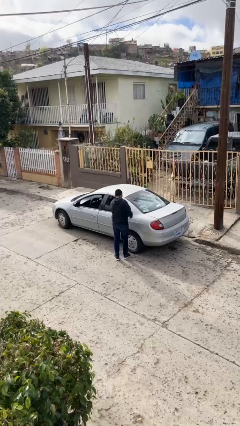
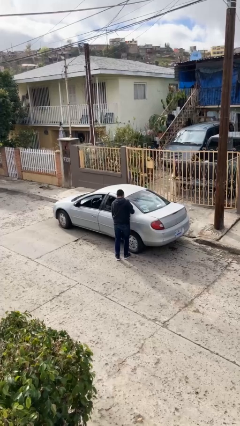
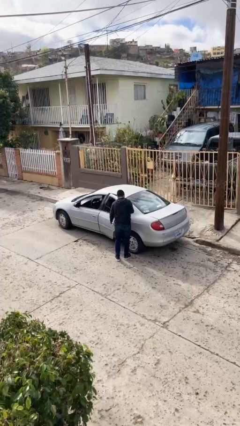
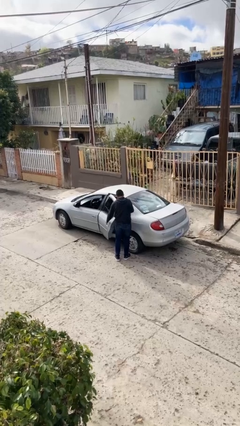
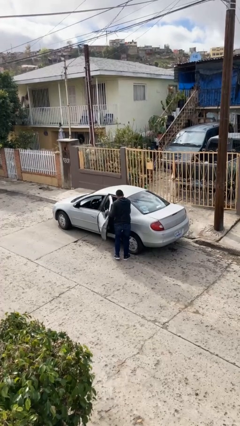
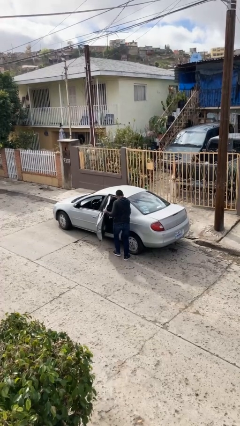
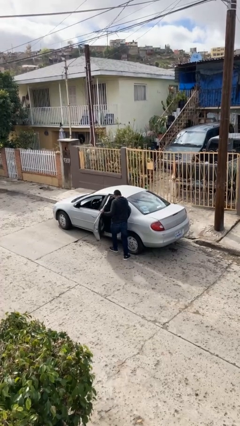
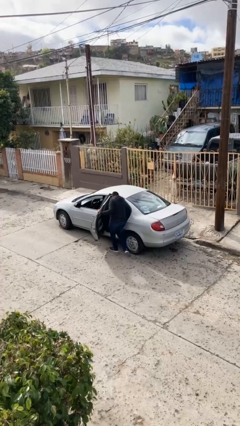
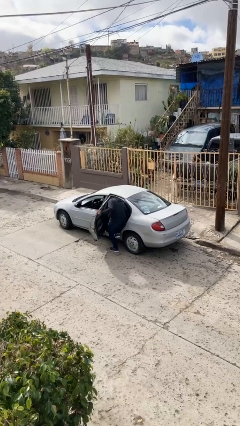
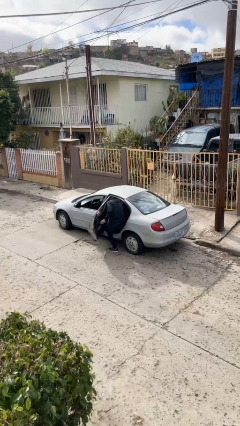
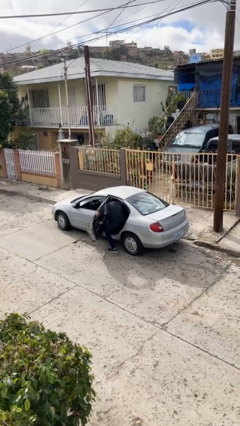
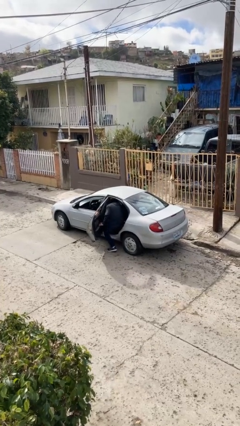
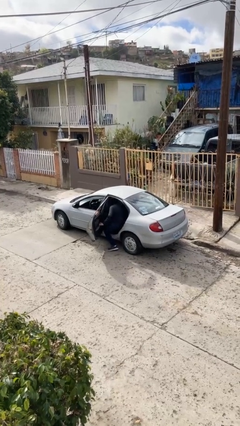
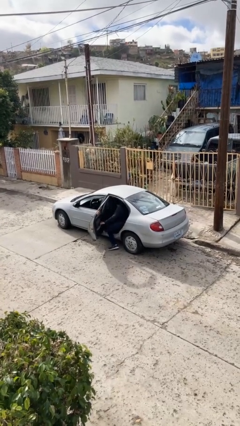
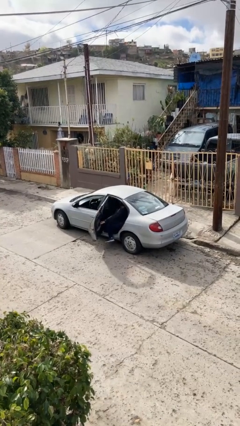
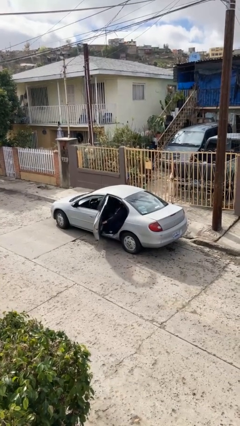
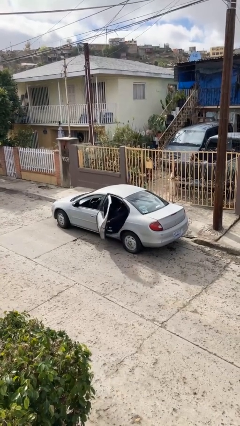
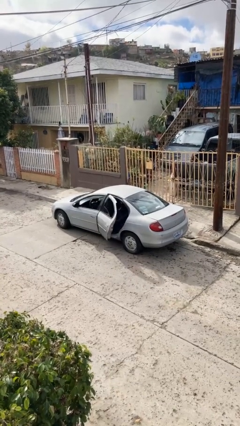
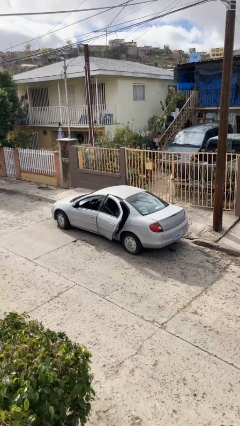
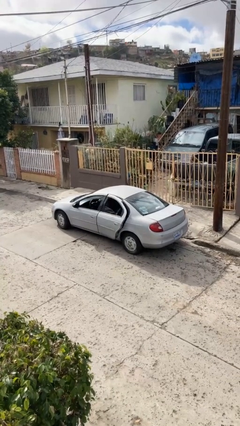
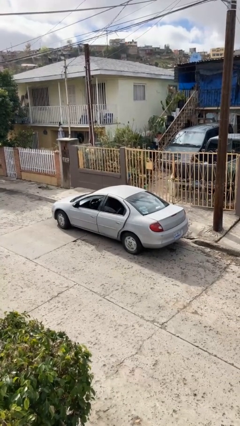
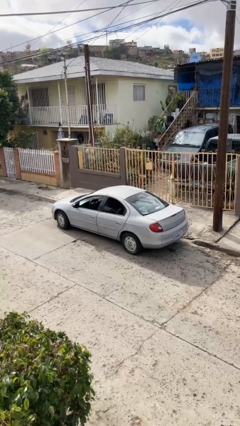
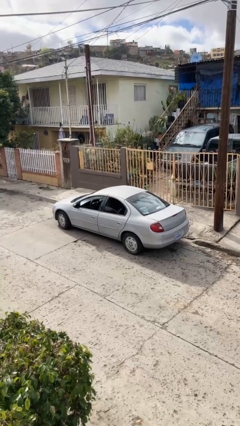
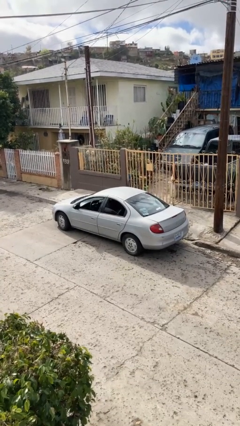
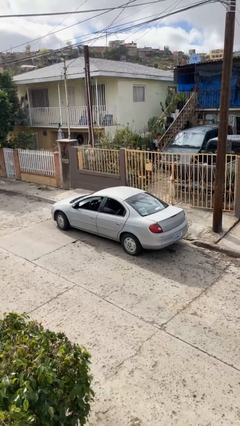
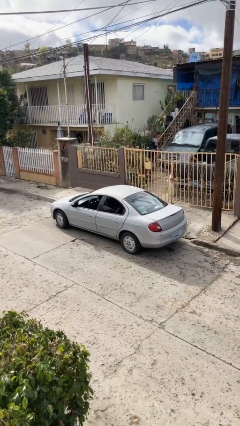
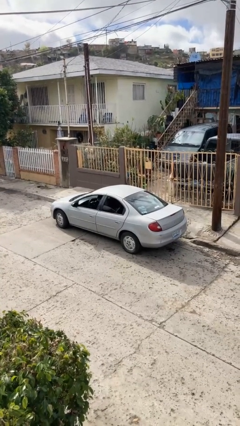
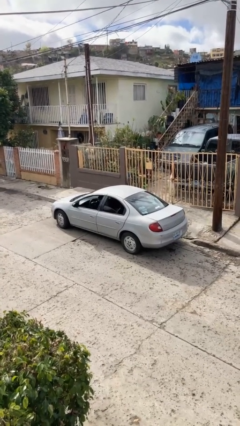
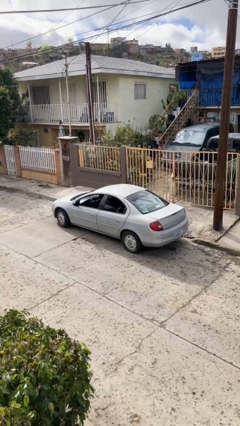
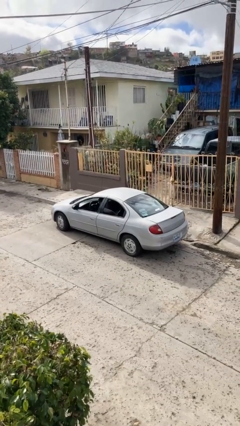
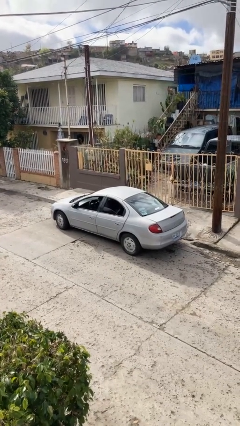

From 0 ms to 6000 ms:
car picks up person

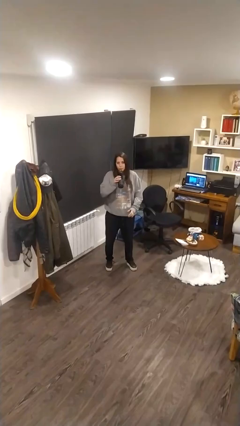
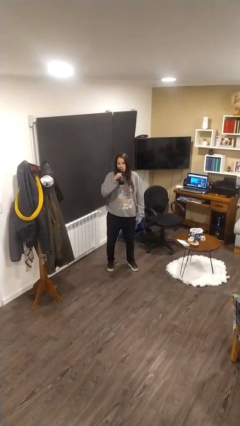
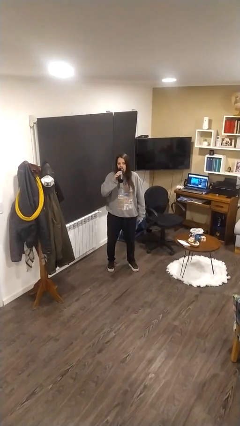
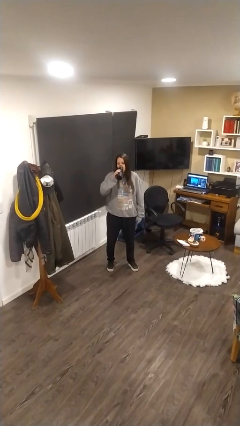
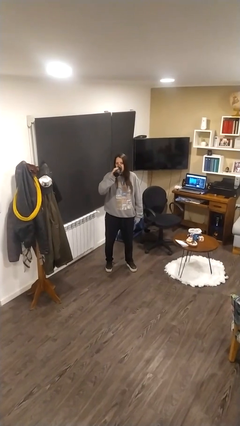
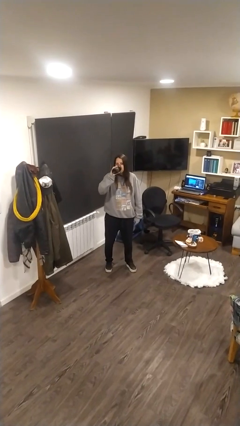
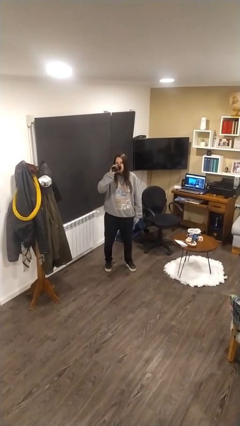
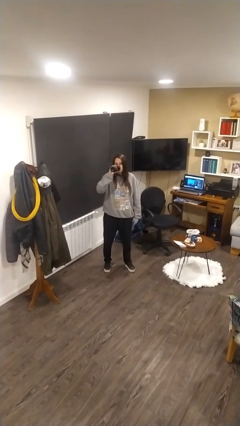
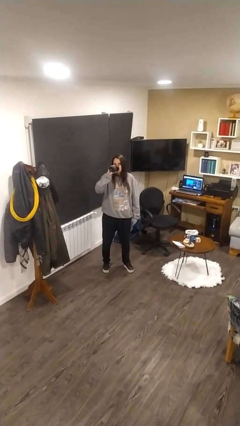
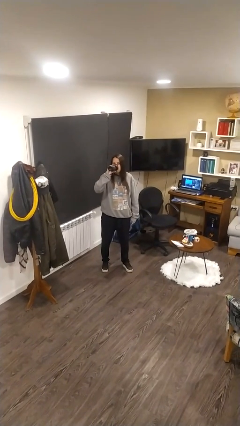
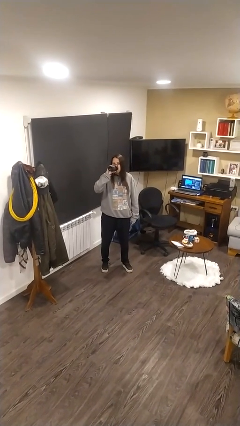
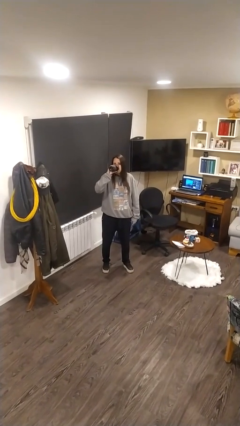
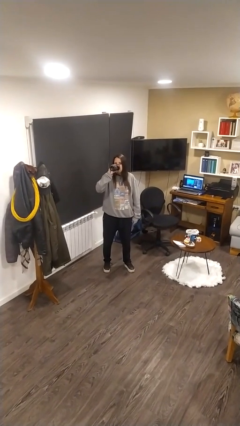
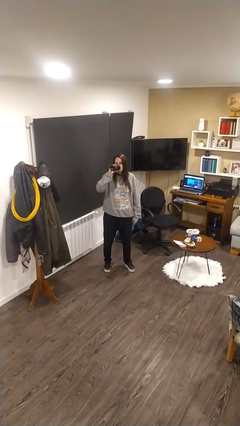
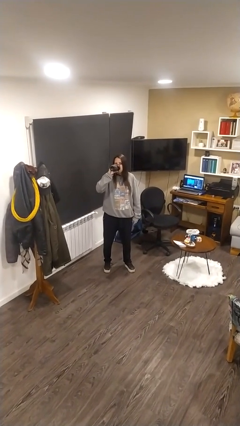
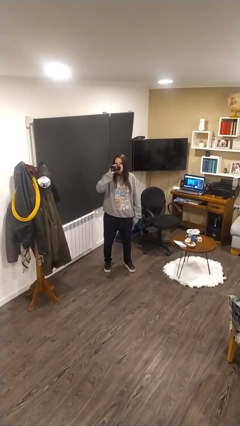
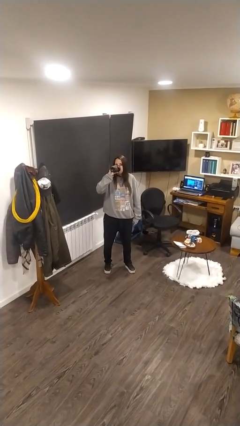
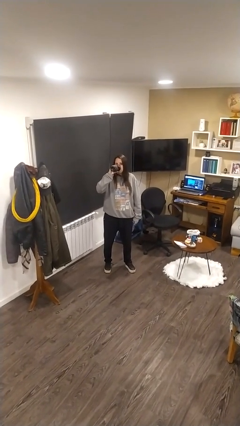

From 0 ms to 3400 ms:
person drinks from bottle

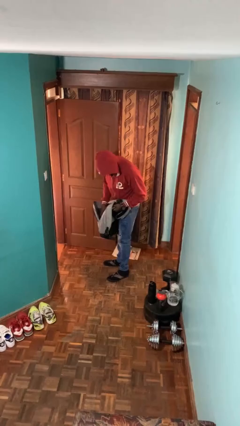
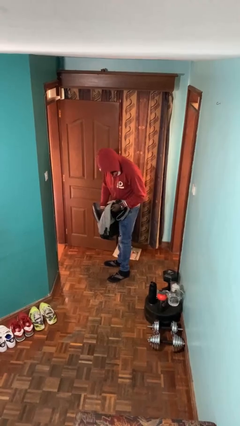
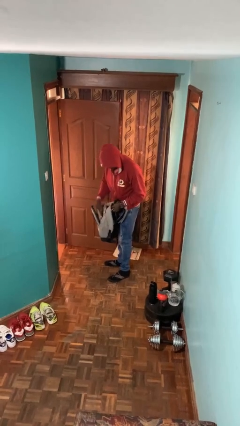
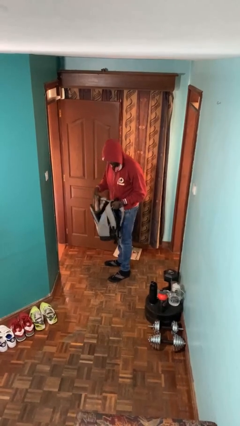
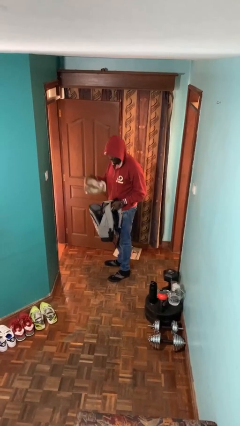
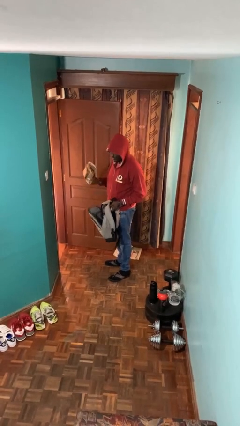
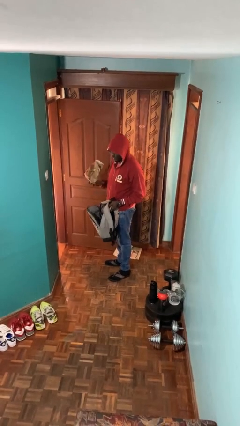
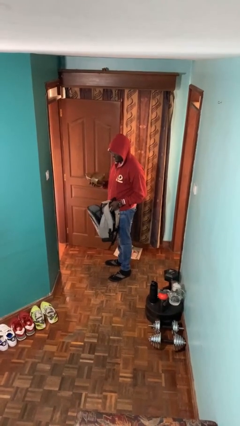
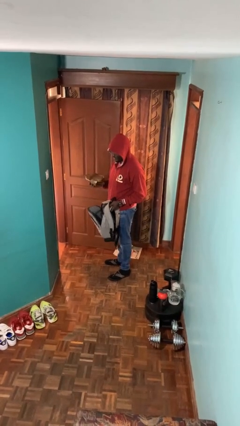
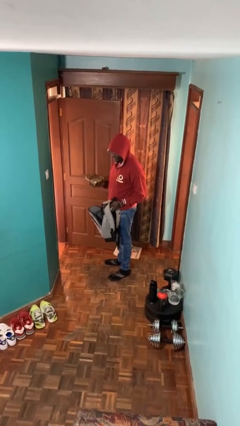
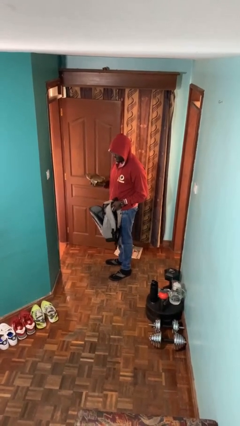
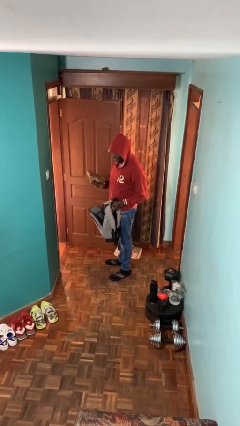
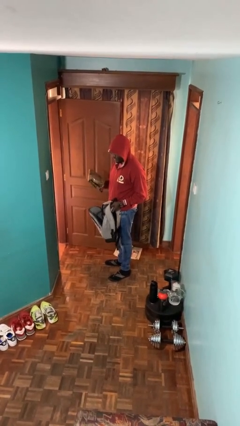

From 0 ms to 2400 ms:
person takes object from backpack

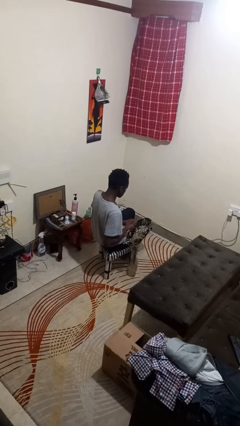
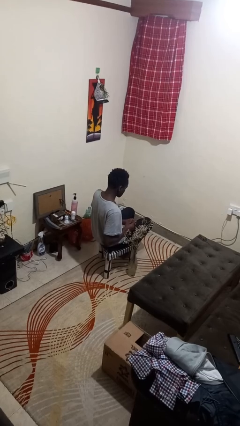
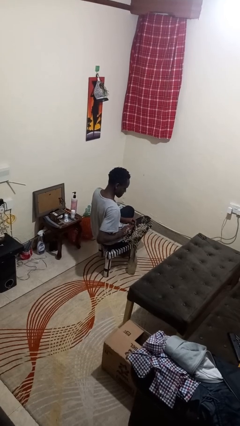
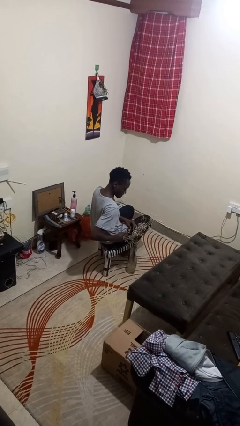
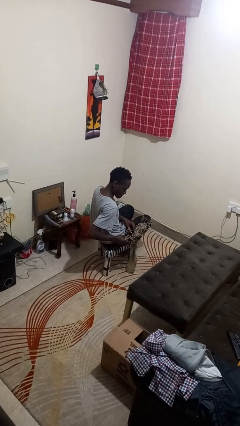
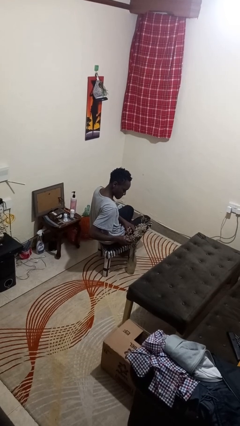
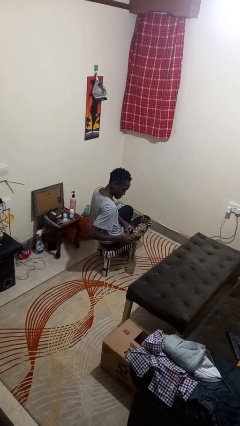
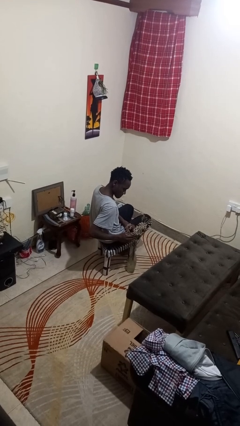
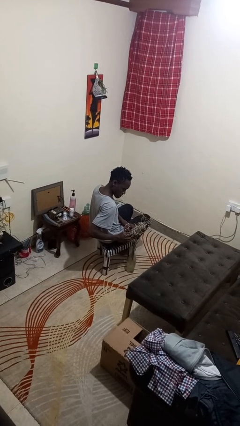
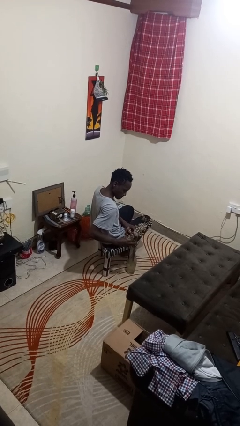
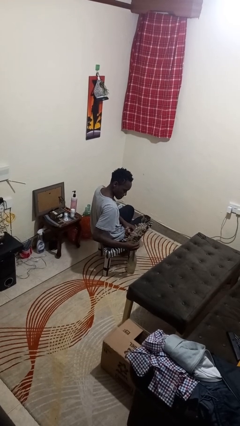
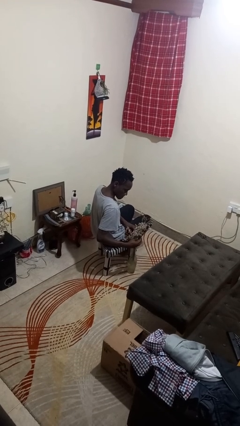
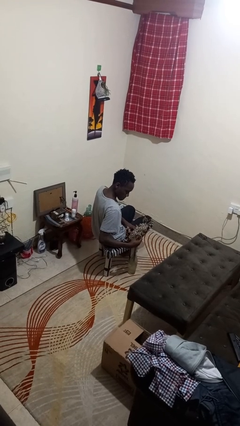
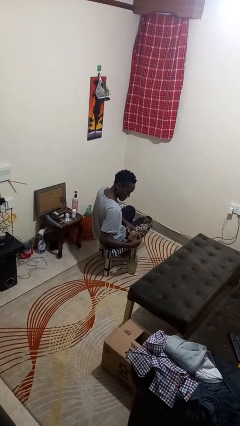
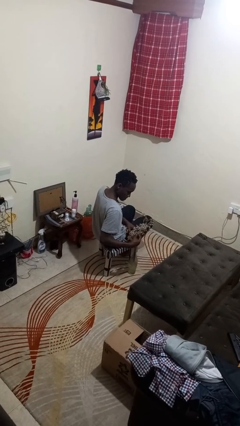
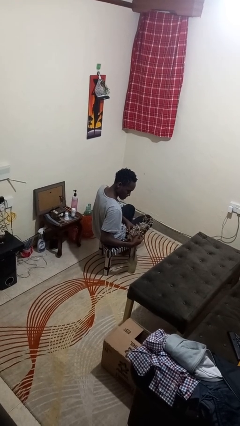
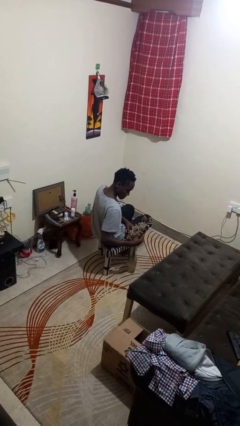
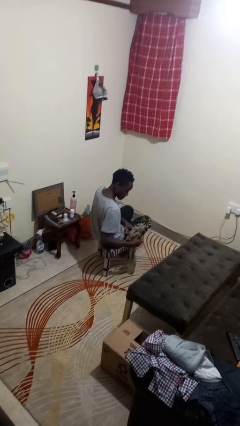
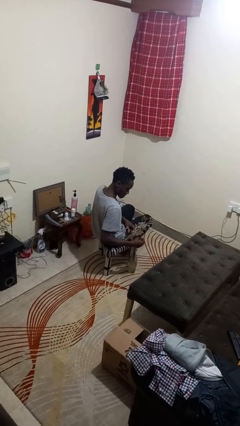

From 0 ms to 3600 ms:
person arranges flowers in vase

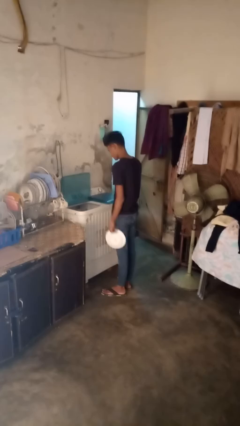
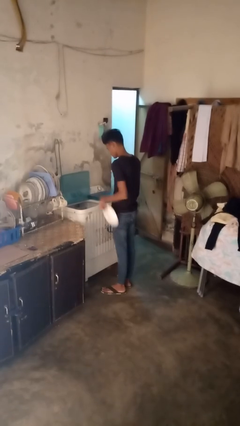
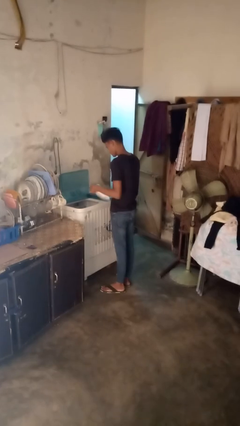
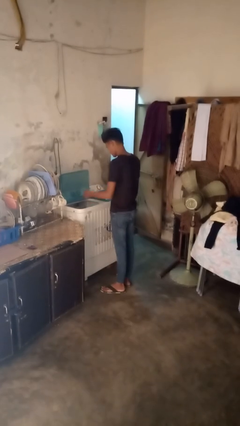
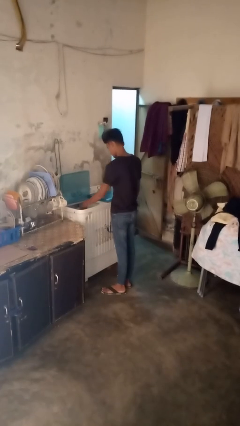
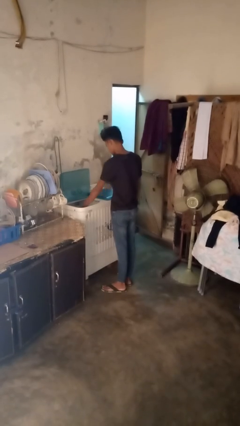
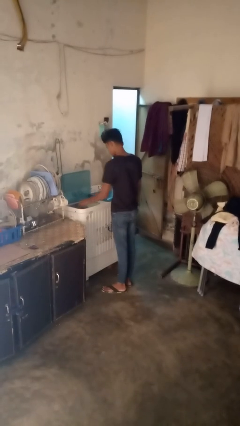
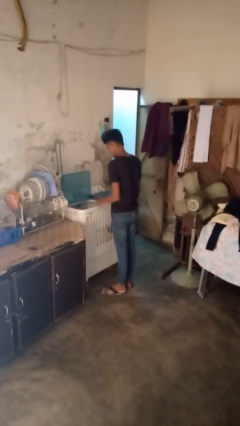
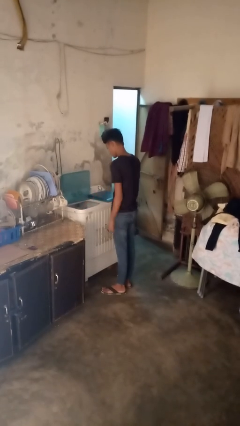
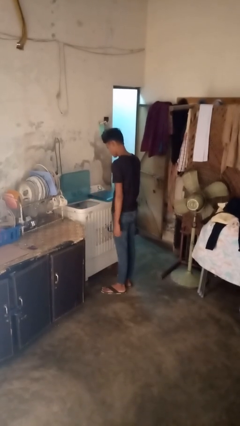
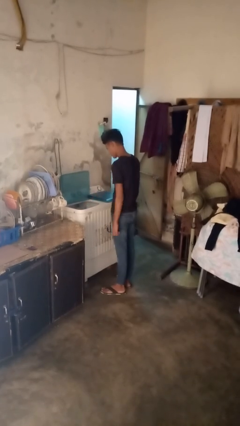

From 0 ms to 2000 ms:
person loads dishwasher

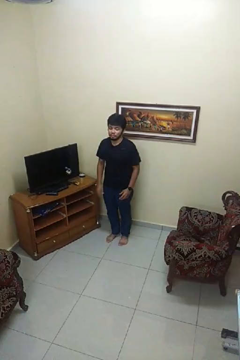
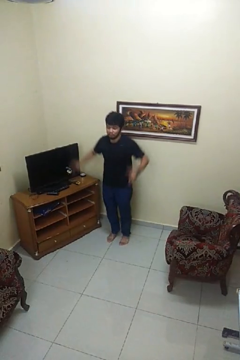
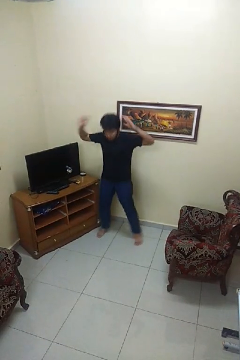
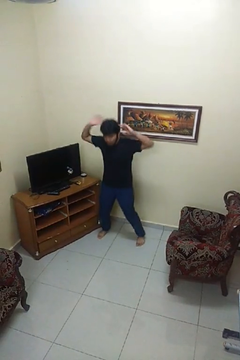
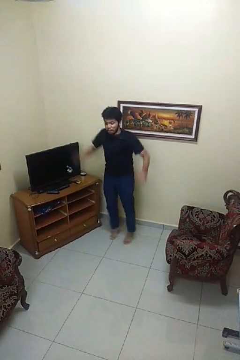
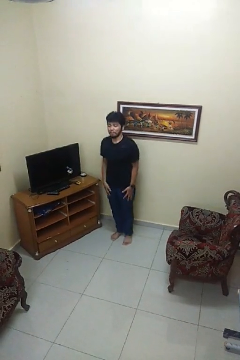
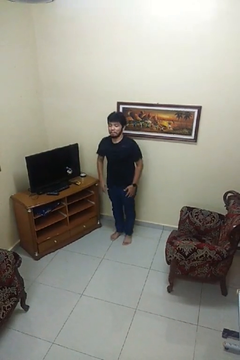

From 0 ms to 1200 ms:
person exercises with jumping jacks
